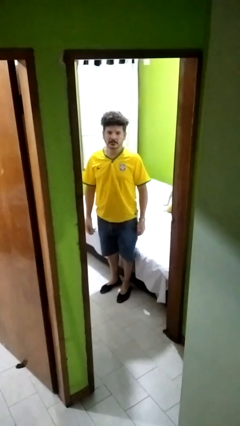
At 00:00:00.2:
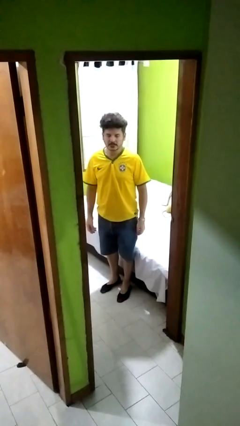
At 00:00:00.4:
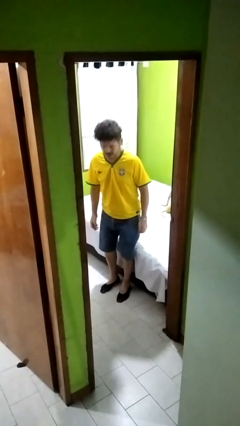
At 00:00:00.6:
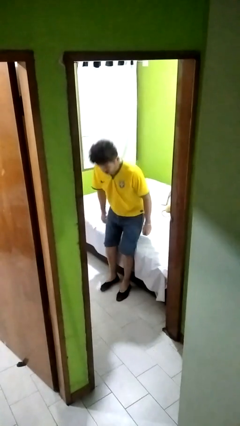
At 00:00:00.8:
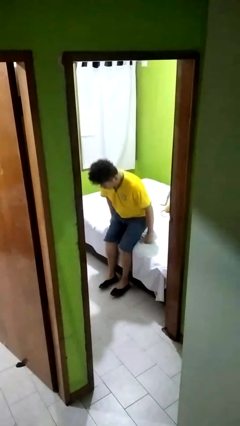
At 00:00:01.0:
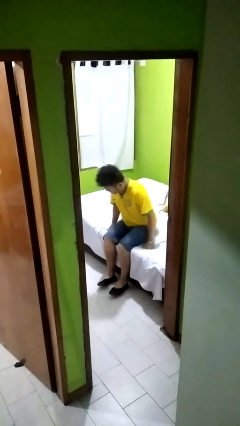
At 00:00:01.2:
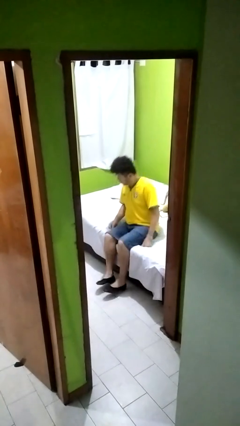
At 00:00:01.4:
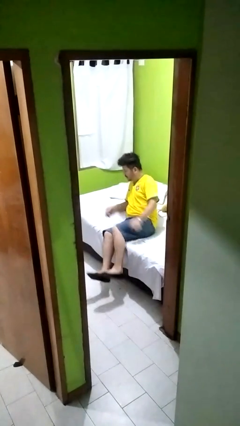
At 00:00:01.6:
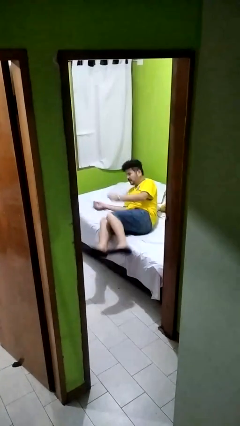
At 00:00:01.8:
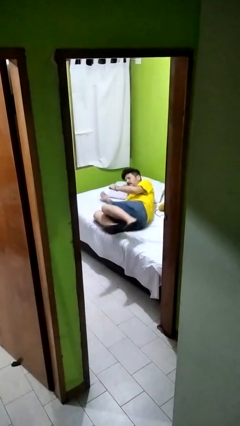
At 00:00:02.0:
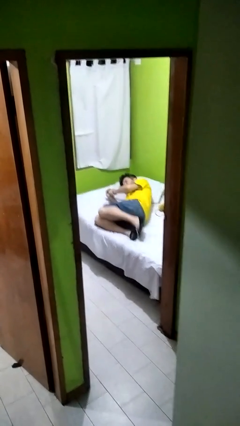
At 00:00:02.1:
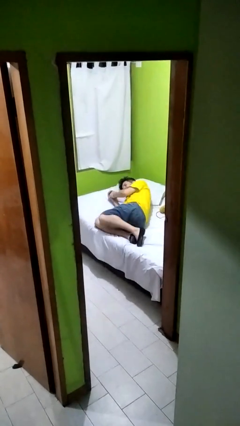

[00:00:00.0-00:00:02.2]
person lies down on bed

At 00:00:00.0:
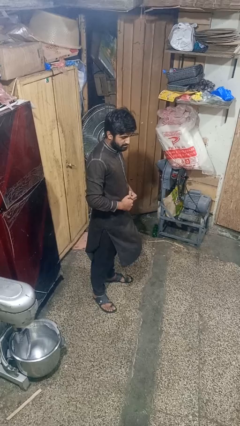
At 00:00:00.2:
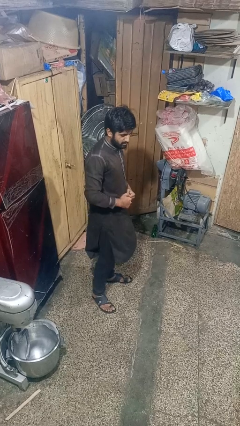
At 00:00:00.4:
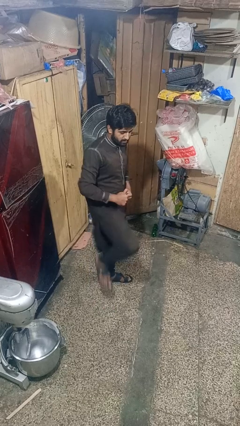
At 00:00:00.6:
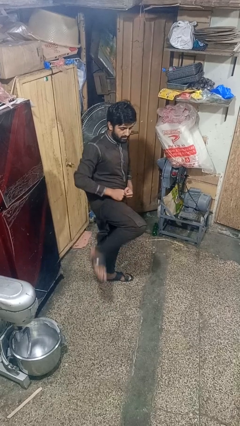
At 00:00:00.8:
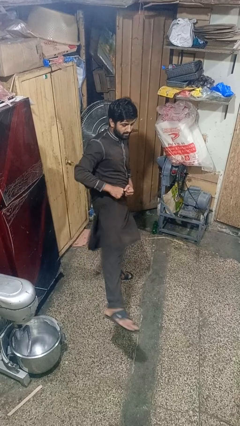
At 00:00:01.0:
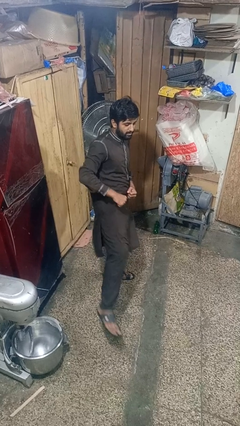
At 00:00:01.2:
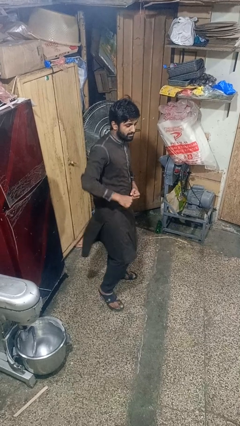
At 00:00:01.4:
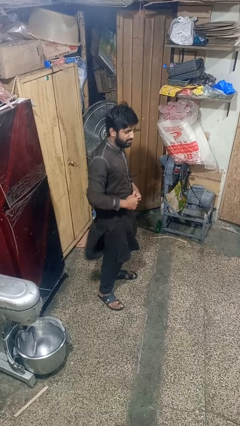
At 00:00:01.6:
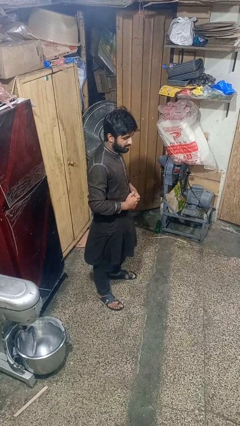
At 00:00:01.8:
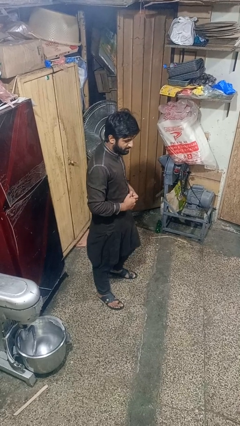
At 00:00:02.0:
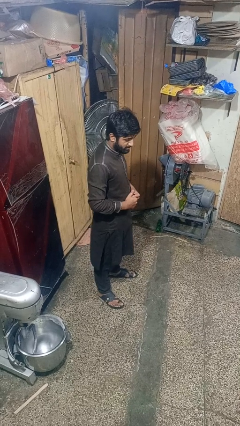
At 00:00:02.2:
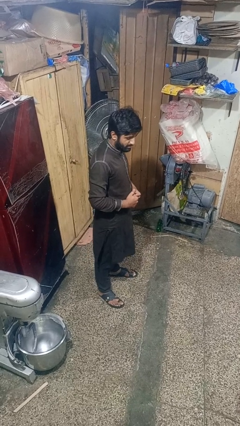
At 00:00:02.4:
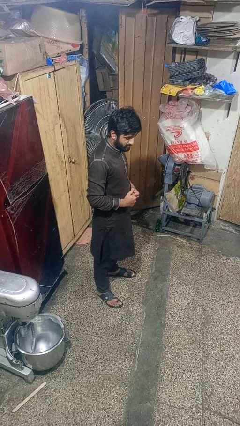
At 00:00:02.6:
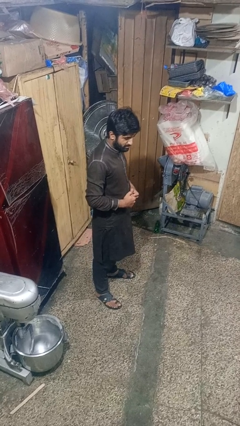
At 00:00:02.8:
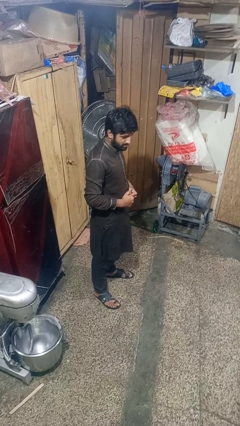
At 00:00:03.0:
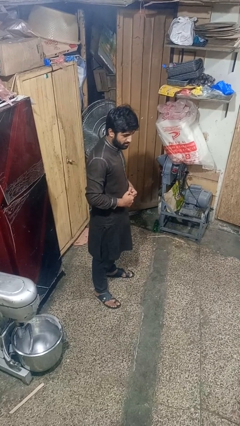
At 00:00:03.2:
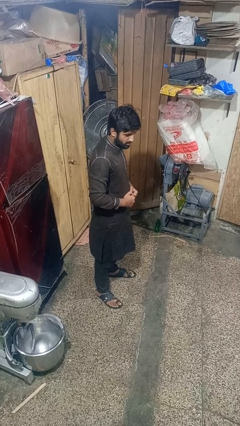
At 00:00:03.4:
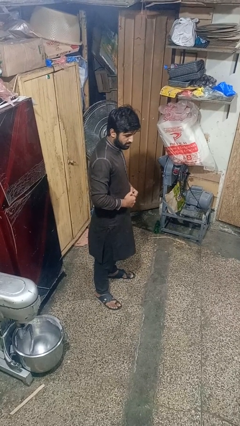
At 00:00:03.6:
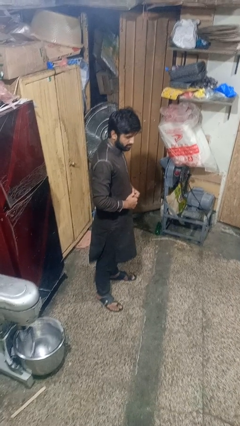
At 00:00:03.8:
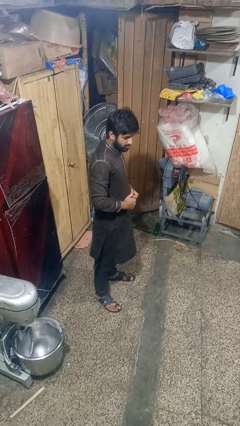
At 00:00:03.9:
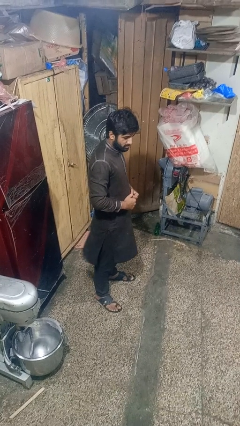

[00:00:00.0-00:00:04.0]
person karate kicks

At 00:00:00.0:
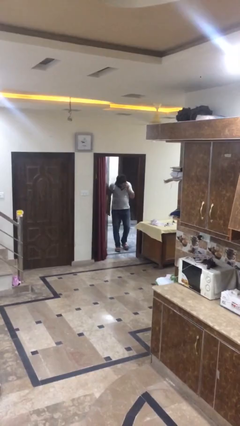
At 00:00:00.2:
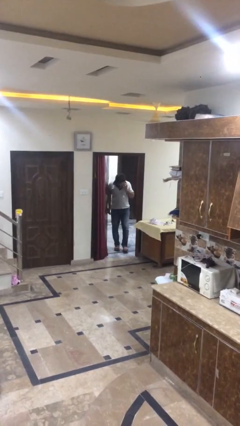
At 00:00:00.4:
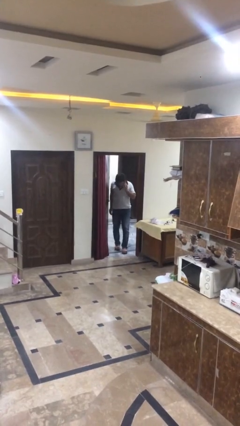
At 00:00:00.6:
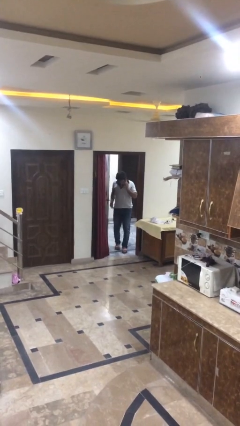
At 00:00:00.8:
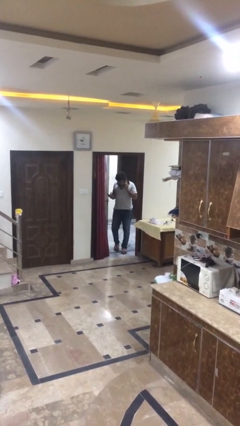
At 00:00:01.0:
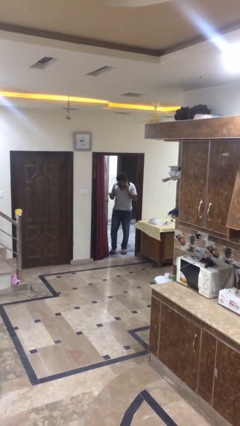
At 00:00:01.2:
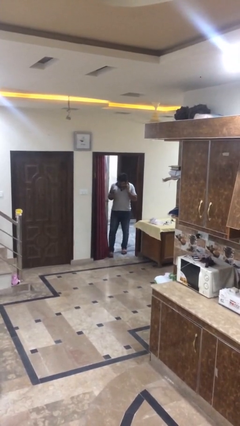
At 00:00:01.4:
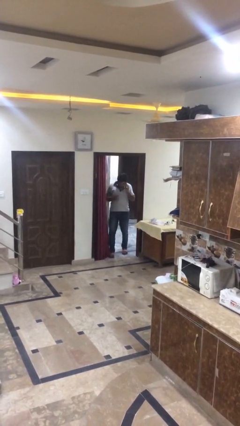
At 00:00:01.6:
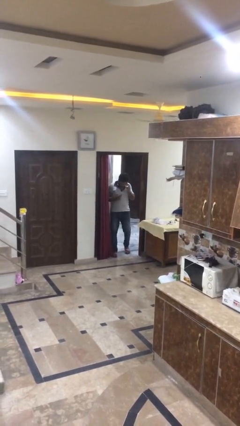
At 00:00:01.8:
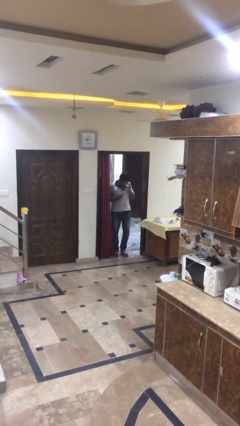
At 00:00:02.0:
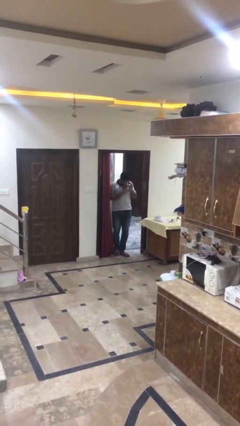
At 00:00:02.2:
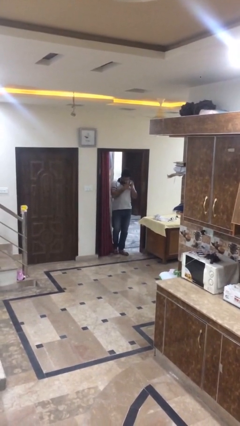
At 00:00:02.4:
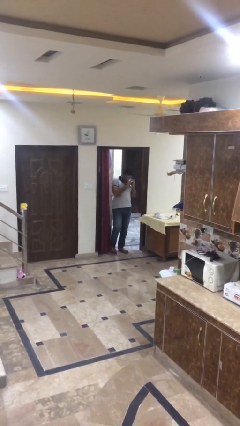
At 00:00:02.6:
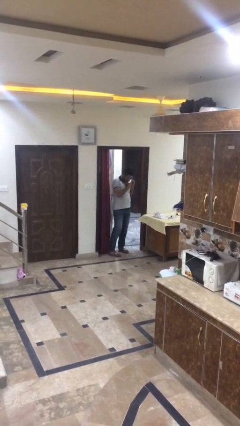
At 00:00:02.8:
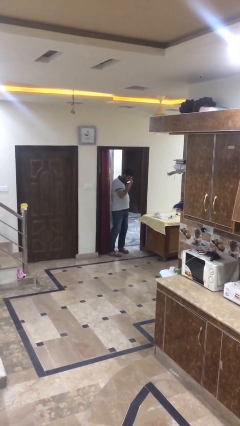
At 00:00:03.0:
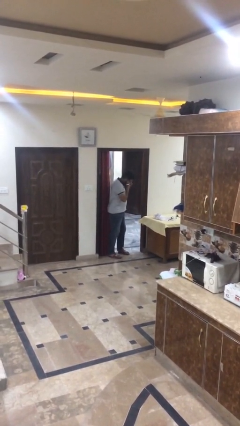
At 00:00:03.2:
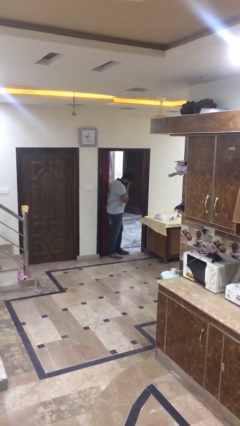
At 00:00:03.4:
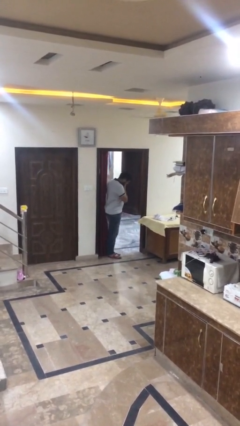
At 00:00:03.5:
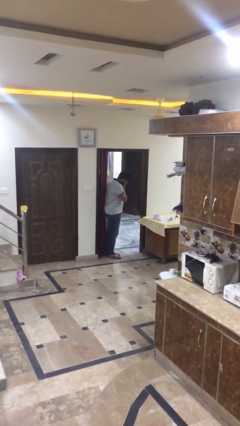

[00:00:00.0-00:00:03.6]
person enters scene through structure

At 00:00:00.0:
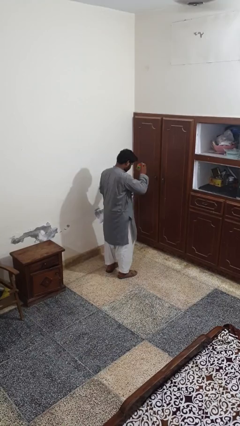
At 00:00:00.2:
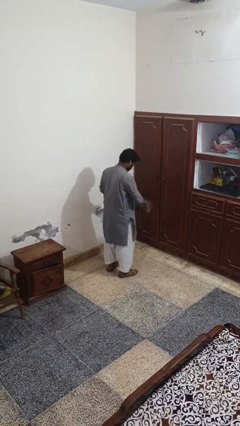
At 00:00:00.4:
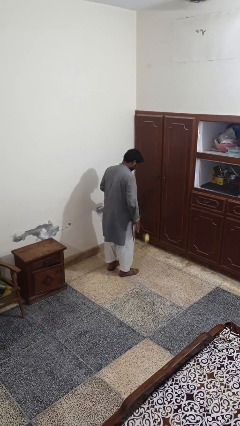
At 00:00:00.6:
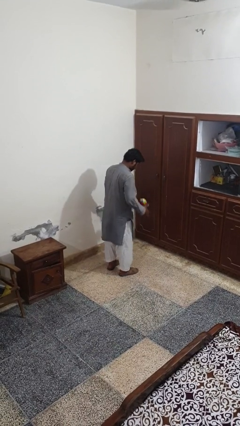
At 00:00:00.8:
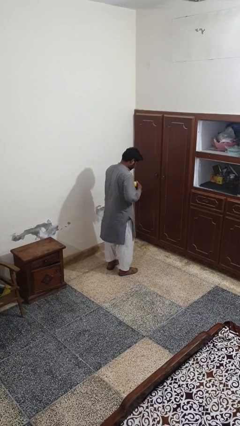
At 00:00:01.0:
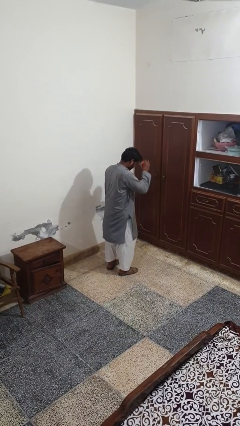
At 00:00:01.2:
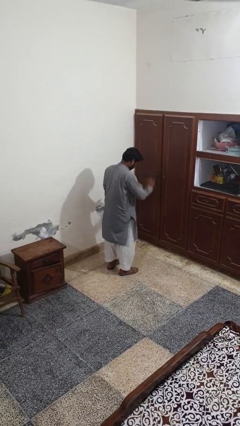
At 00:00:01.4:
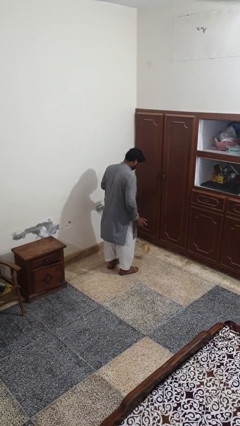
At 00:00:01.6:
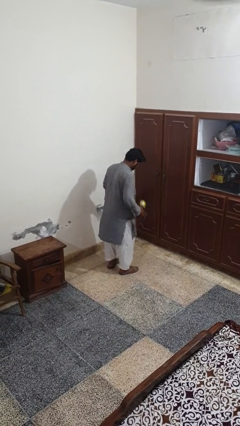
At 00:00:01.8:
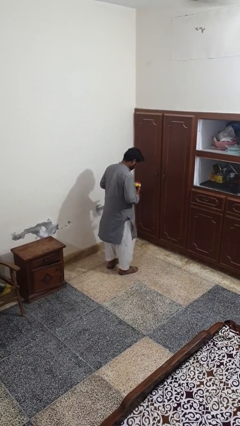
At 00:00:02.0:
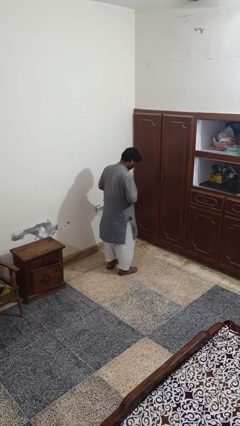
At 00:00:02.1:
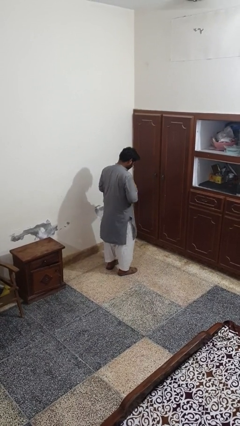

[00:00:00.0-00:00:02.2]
person bounces ball on floor

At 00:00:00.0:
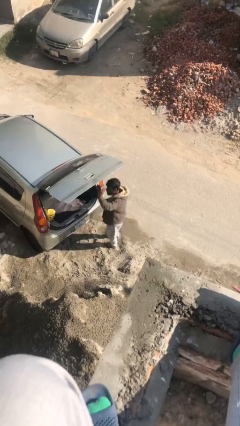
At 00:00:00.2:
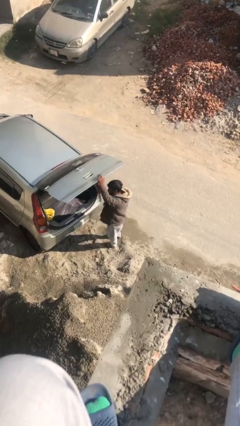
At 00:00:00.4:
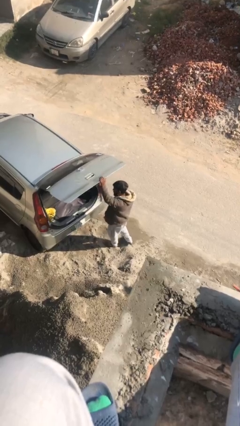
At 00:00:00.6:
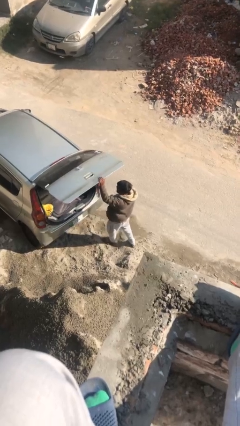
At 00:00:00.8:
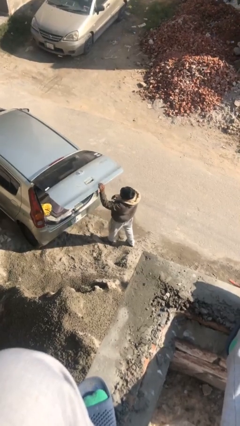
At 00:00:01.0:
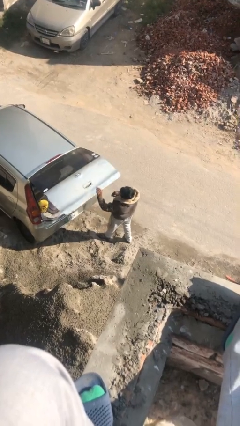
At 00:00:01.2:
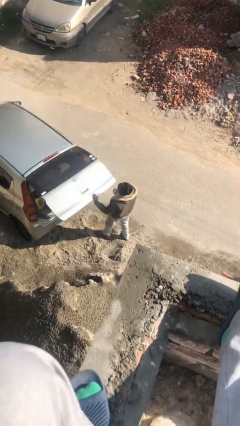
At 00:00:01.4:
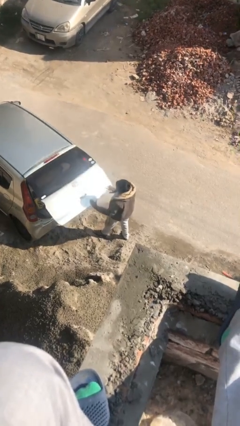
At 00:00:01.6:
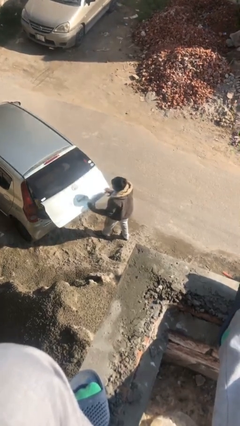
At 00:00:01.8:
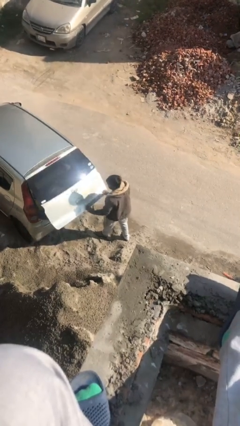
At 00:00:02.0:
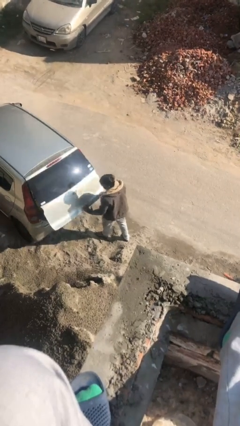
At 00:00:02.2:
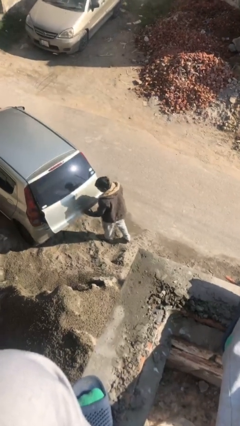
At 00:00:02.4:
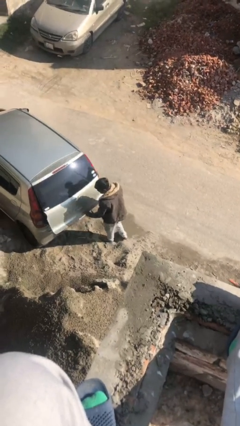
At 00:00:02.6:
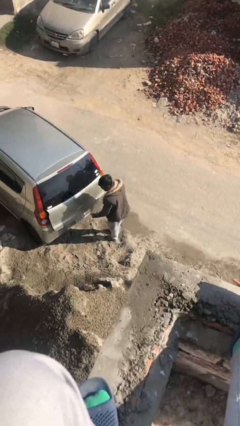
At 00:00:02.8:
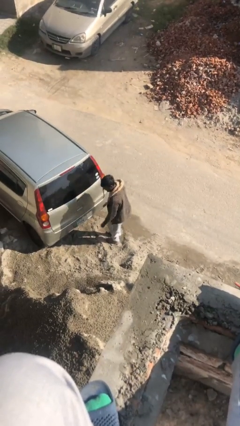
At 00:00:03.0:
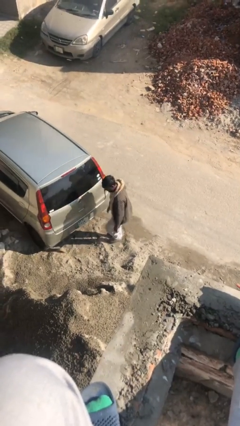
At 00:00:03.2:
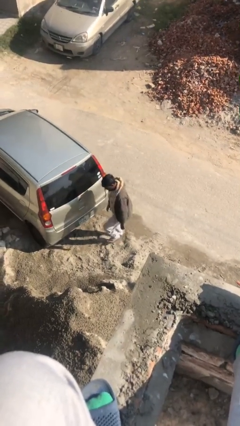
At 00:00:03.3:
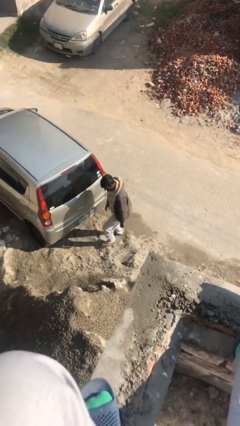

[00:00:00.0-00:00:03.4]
person closes car trunk

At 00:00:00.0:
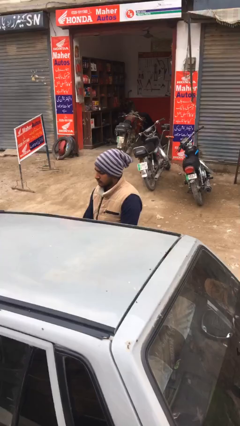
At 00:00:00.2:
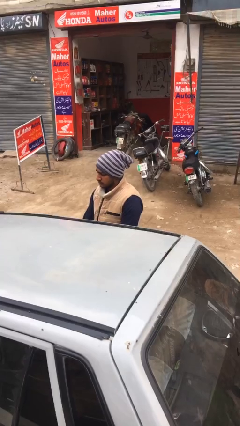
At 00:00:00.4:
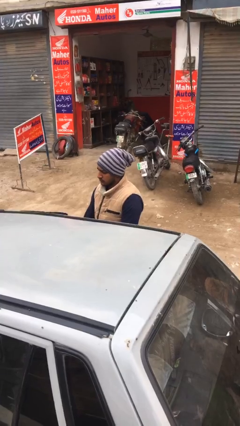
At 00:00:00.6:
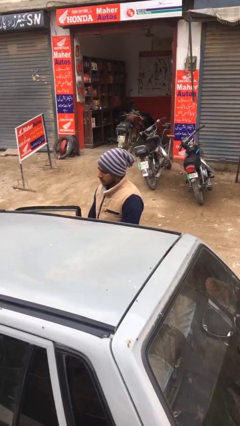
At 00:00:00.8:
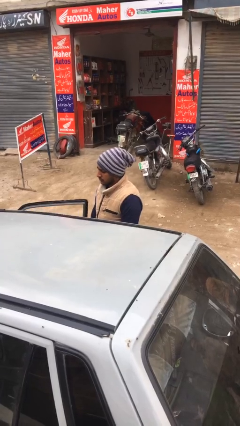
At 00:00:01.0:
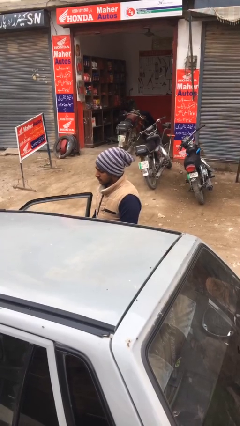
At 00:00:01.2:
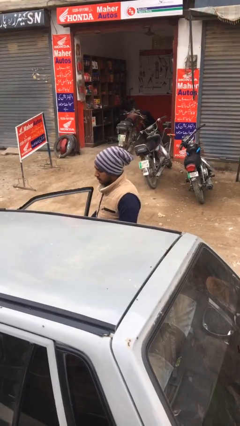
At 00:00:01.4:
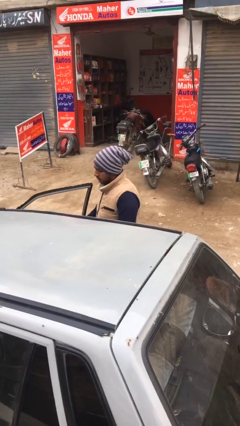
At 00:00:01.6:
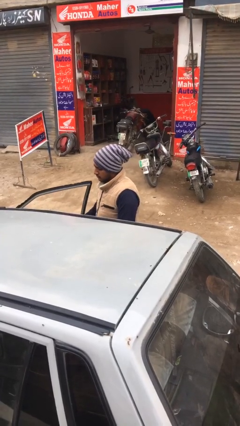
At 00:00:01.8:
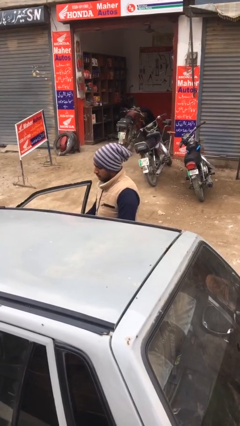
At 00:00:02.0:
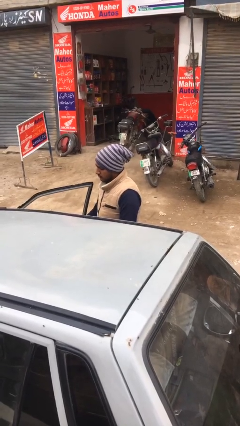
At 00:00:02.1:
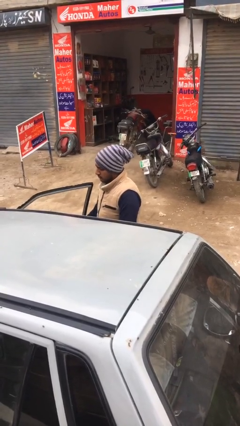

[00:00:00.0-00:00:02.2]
person opens car door
